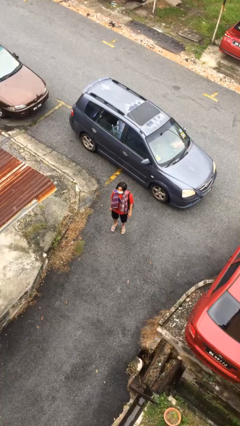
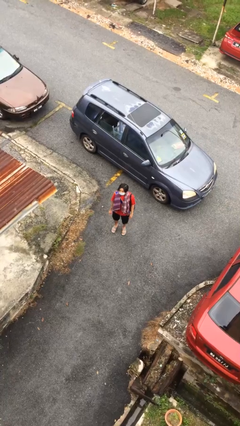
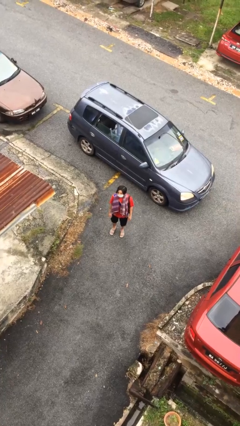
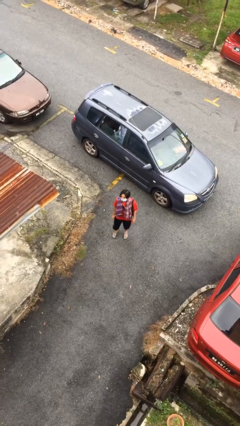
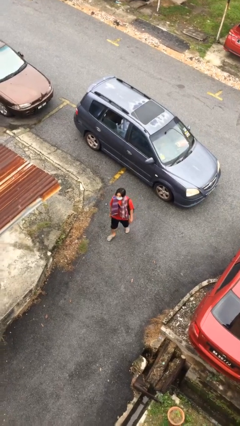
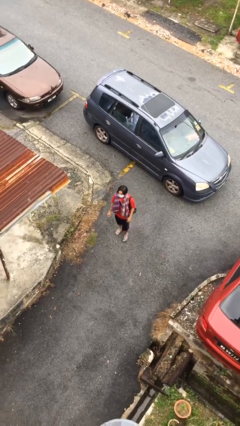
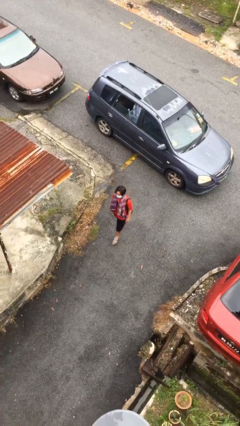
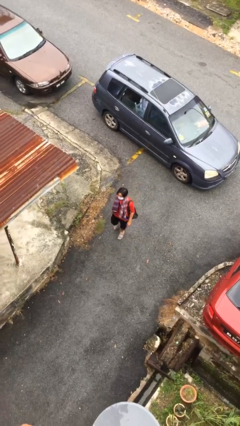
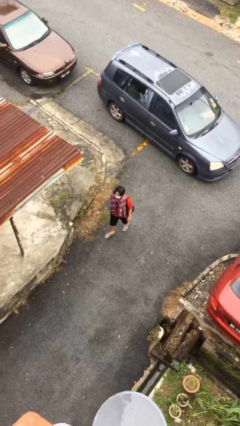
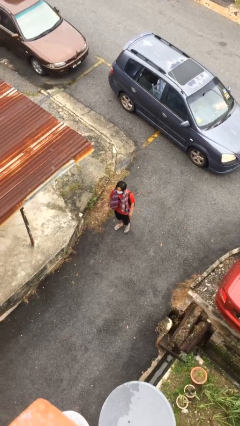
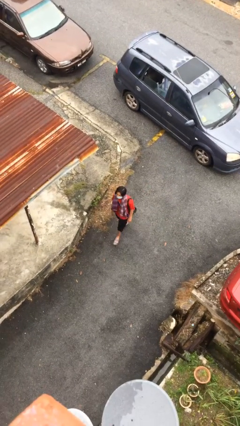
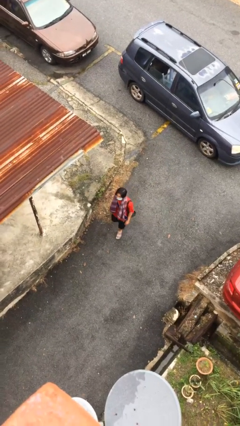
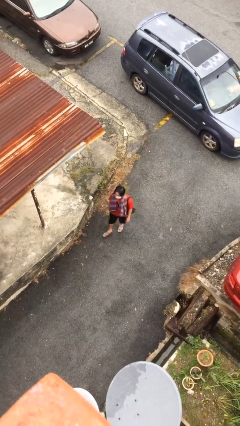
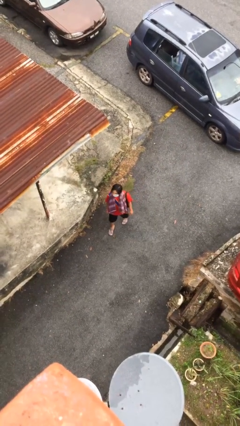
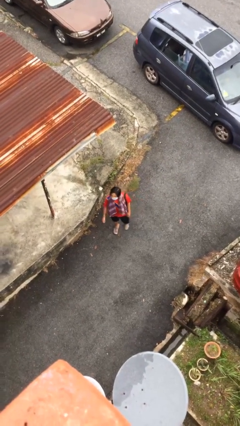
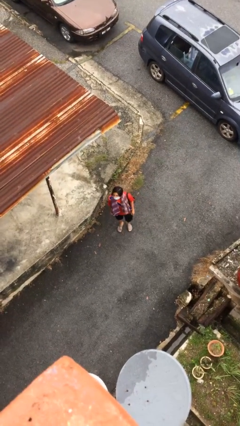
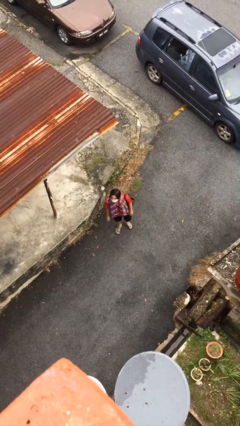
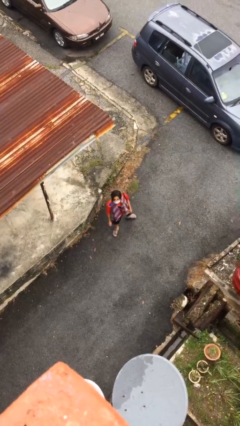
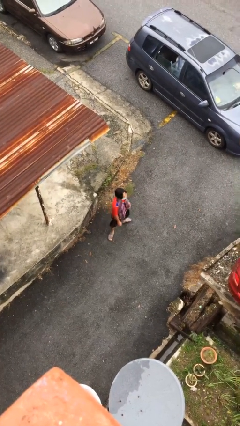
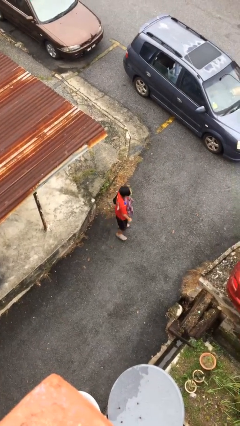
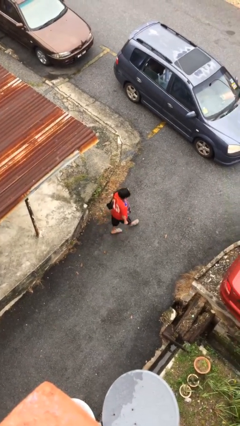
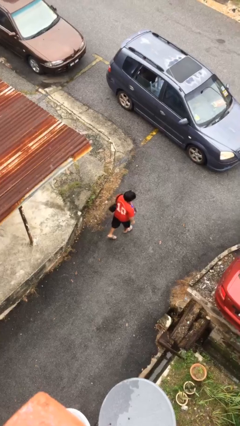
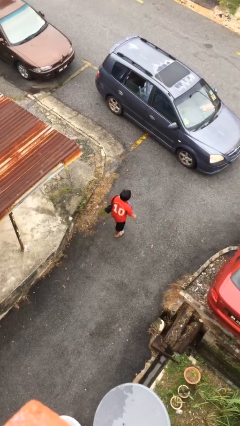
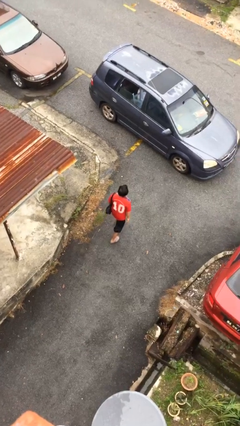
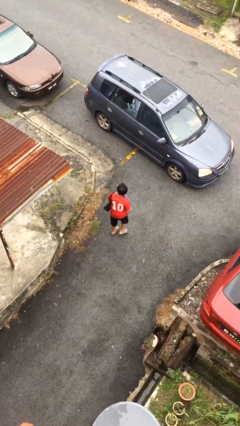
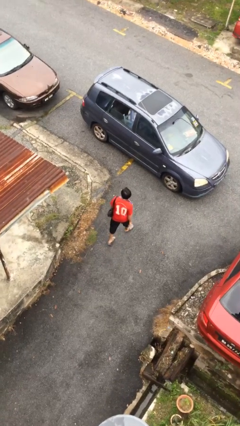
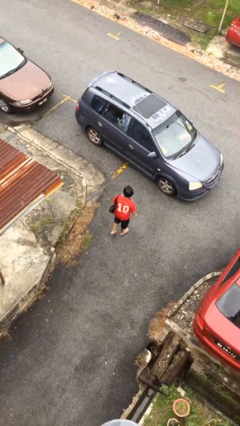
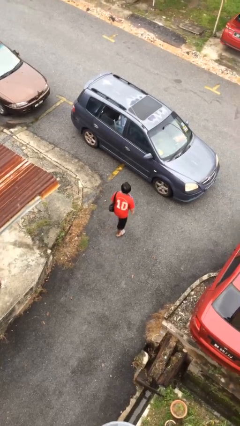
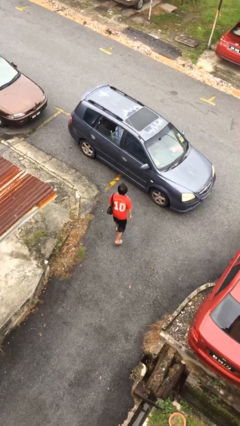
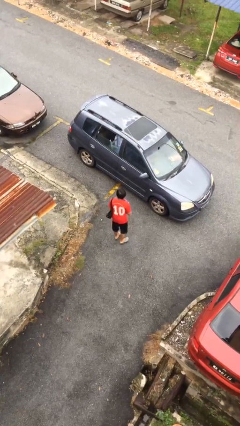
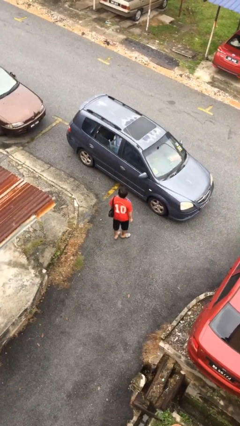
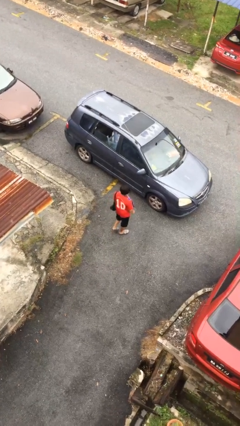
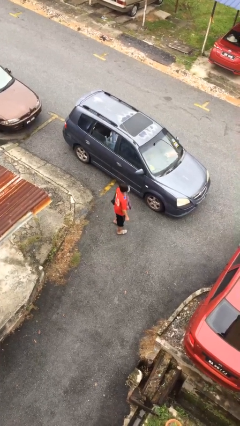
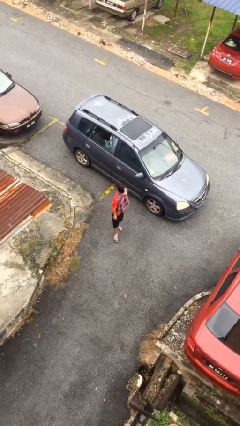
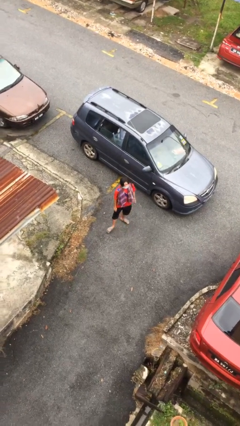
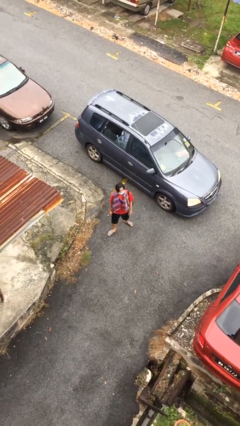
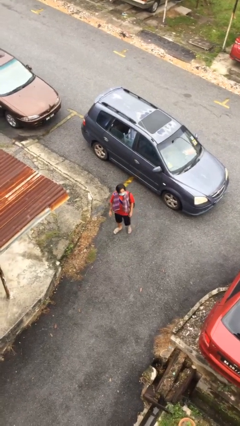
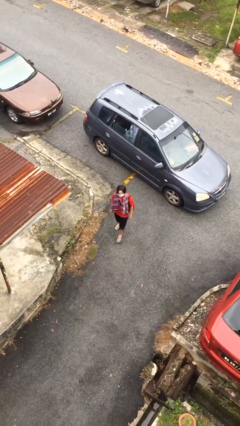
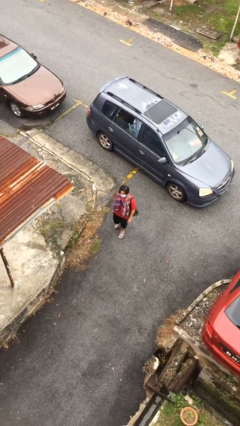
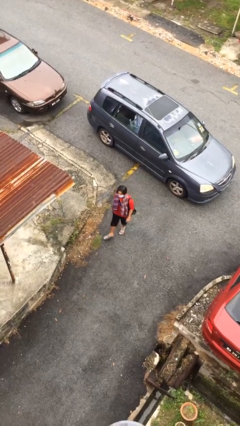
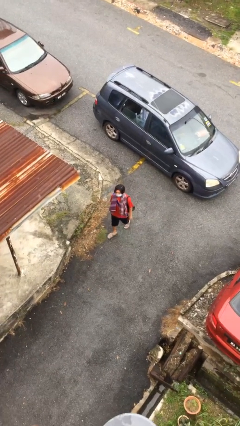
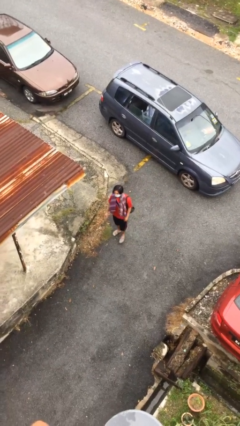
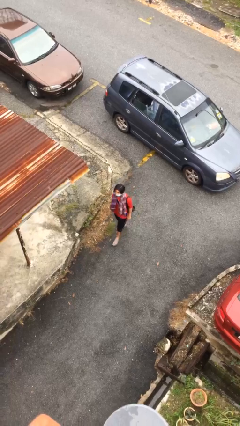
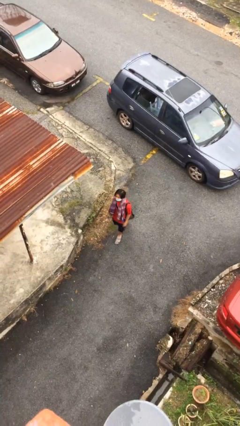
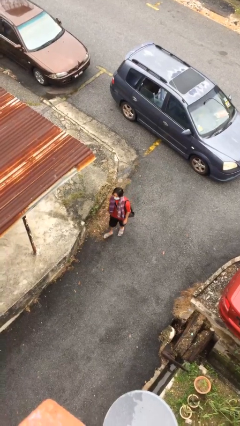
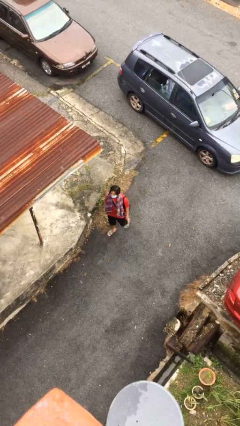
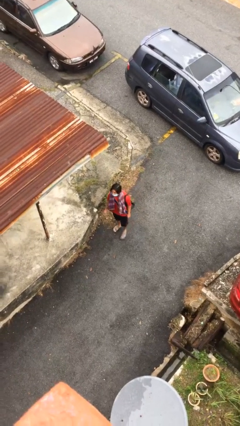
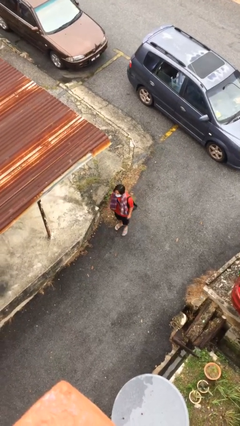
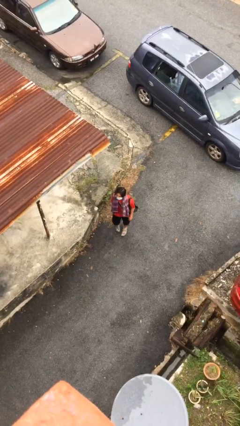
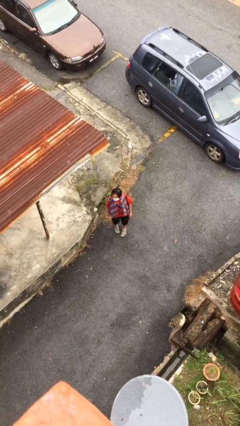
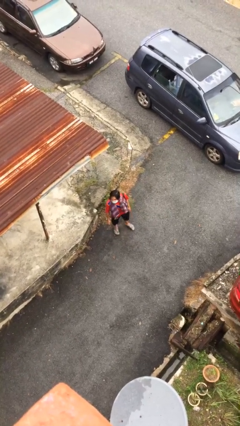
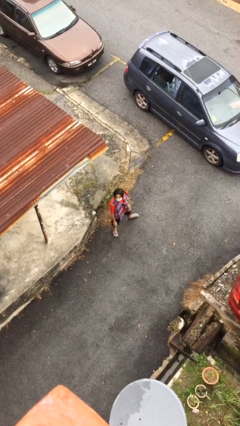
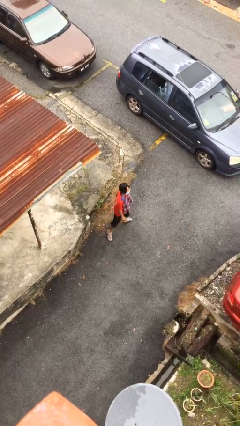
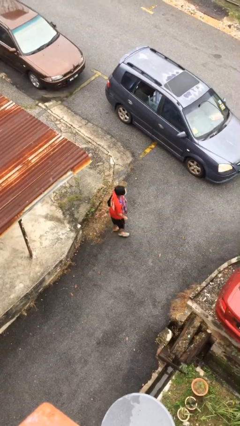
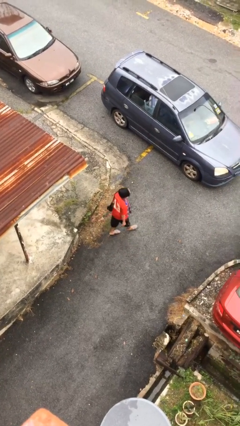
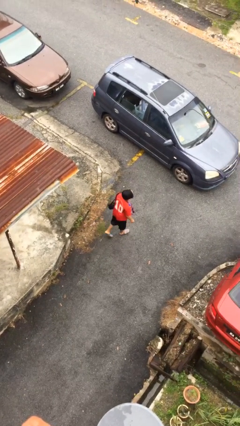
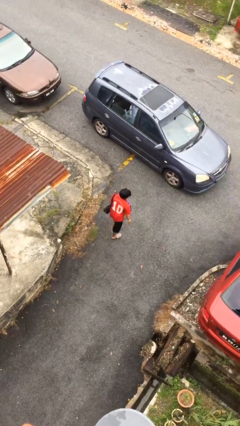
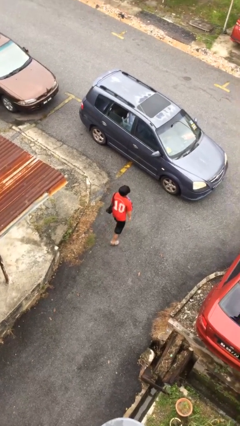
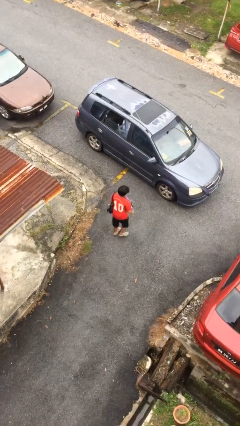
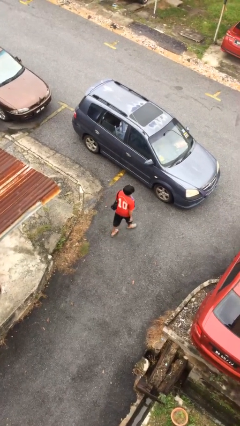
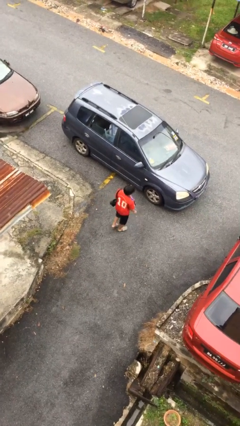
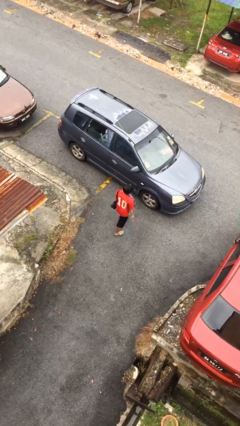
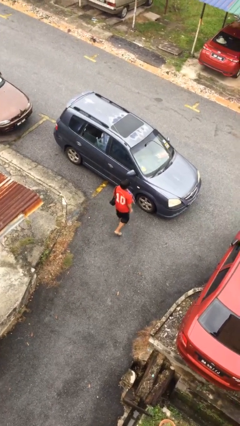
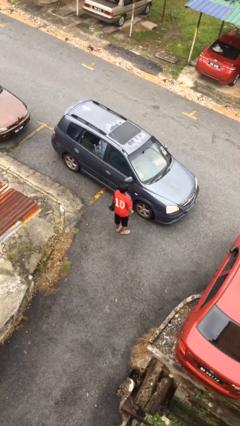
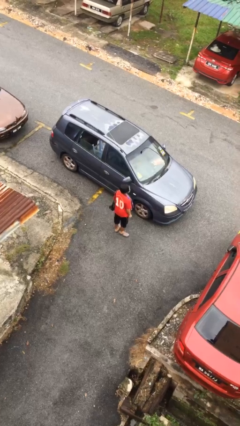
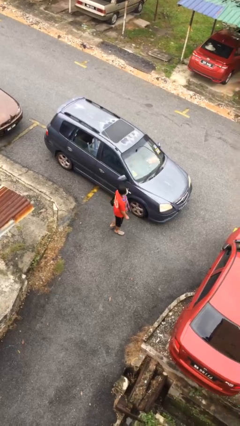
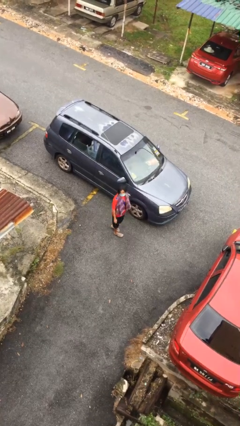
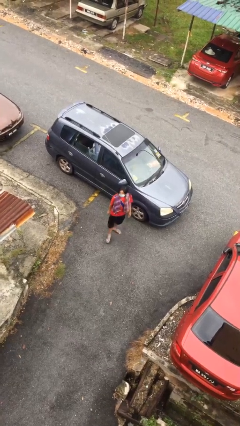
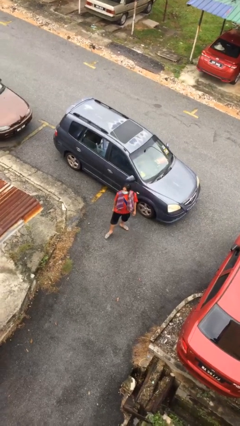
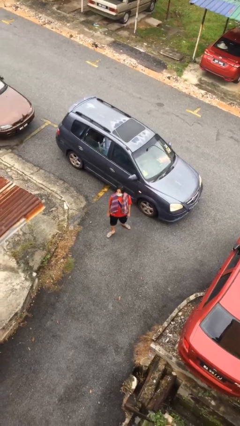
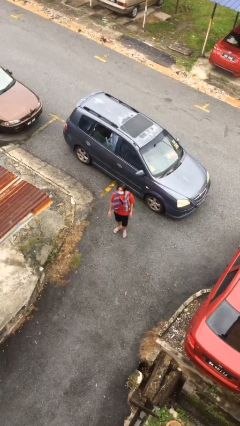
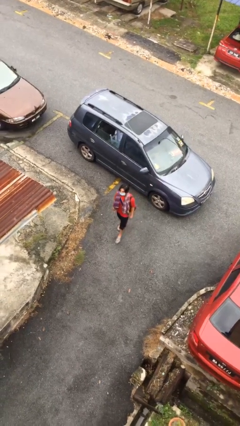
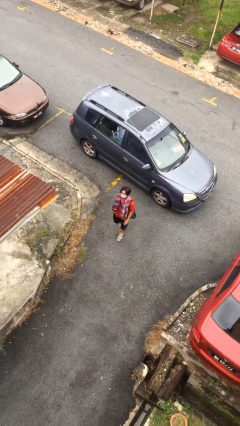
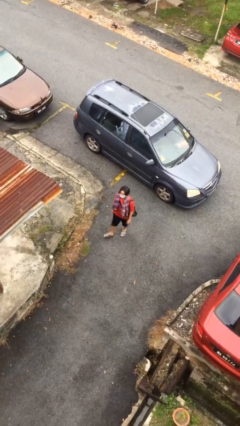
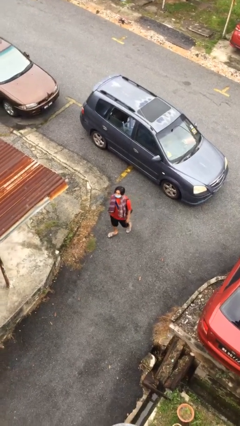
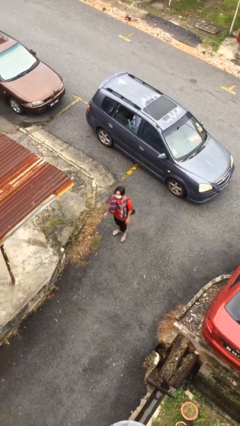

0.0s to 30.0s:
person walks

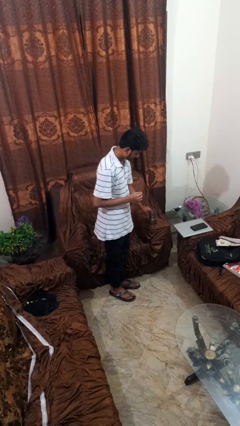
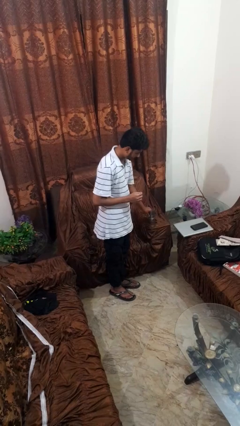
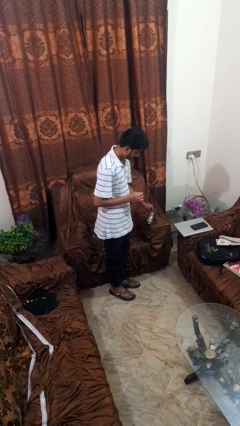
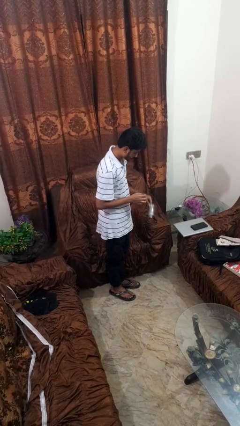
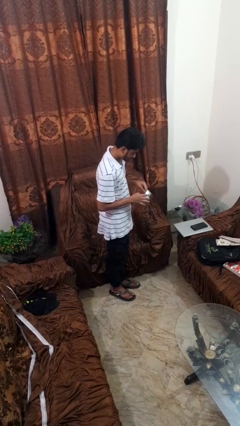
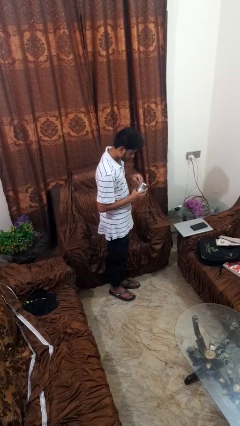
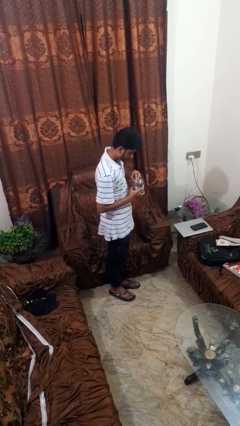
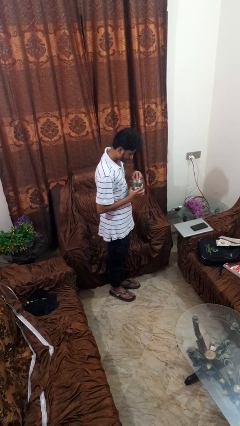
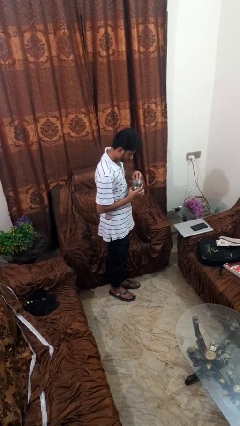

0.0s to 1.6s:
person picks up object from couch

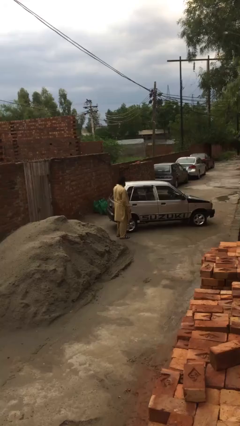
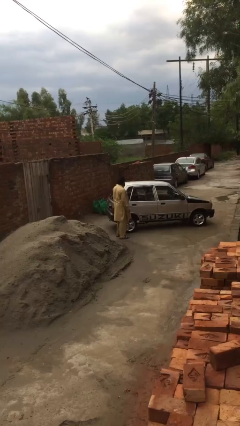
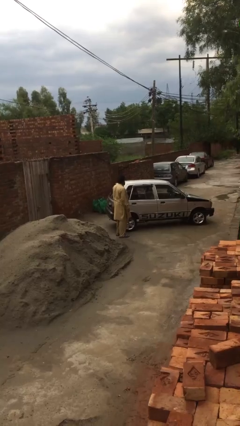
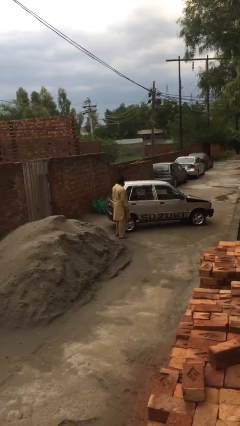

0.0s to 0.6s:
person opens car door

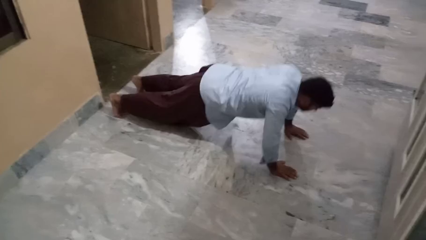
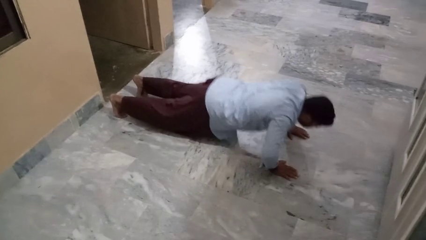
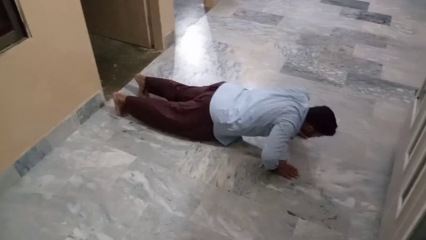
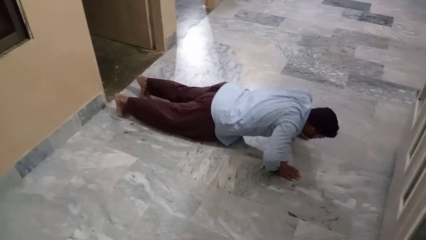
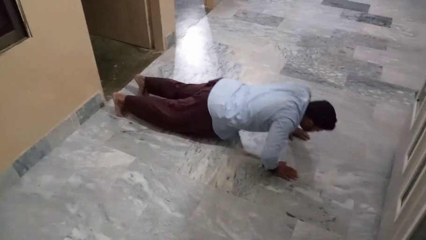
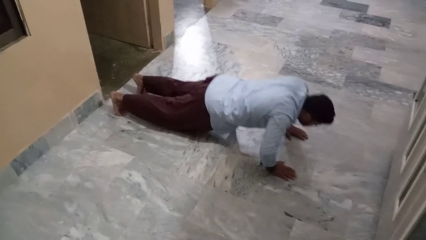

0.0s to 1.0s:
person exercises with pushup
